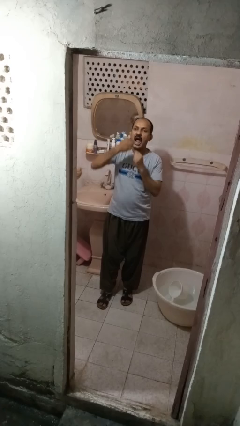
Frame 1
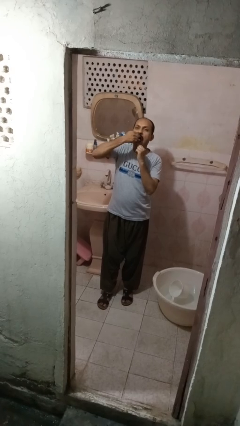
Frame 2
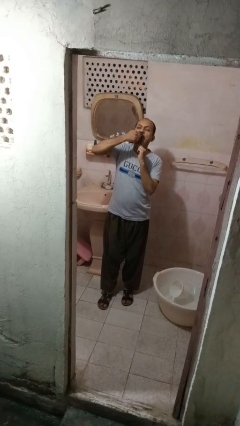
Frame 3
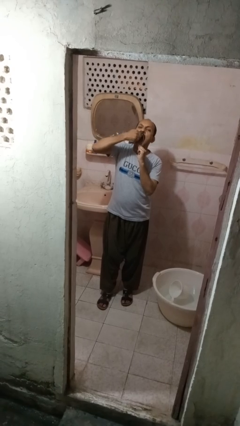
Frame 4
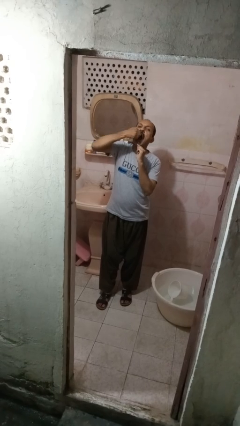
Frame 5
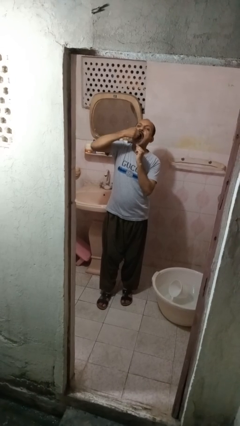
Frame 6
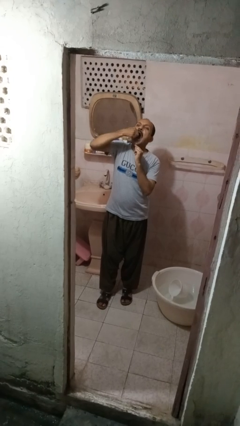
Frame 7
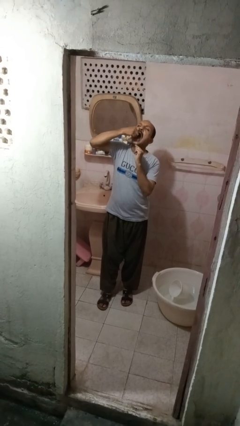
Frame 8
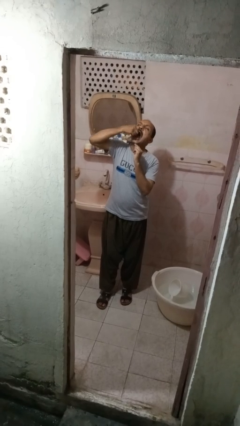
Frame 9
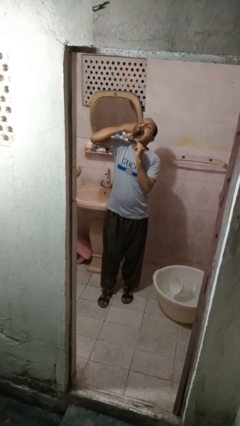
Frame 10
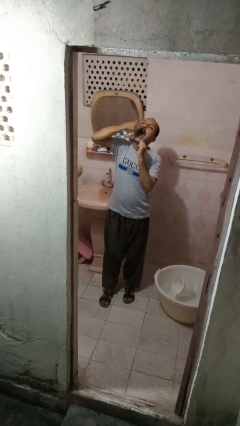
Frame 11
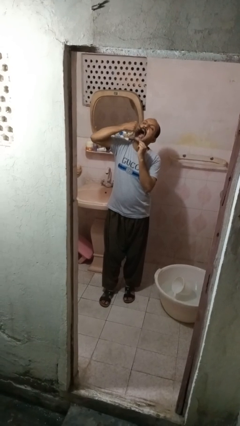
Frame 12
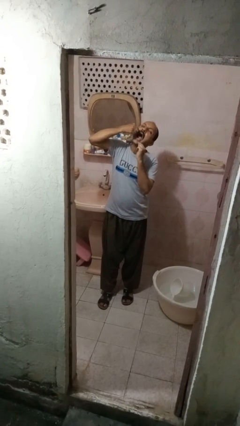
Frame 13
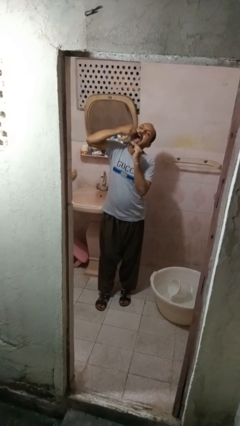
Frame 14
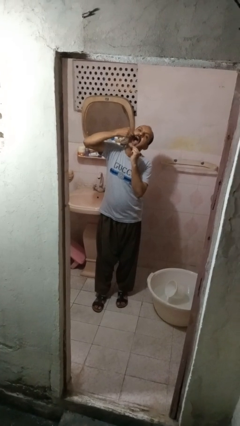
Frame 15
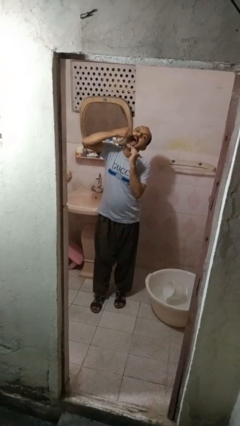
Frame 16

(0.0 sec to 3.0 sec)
person flosses

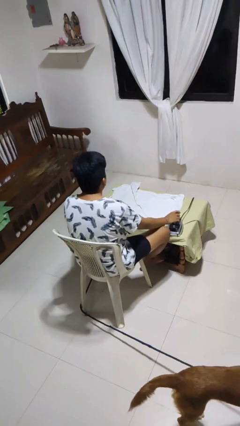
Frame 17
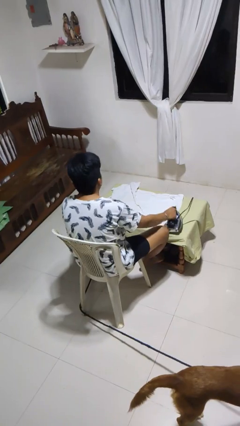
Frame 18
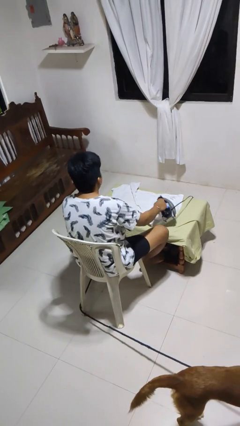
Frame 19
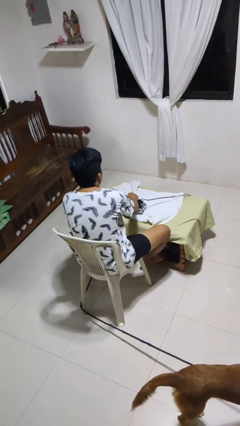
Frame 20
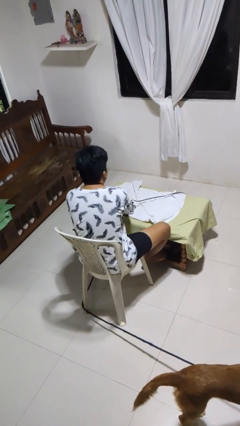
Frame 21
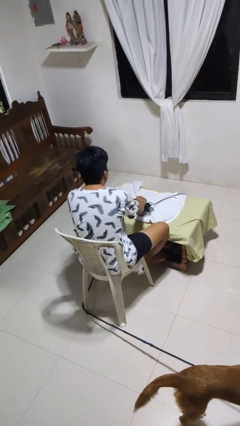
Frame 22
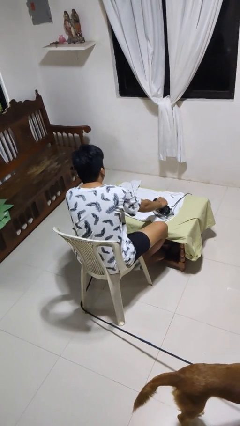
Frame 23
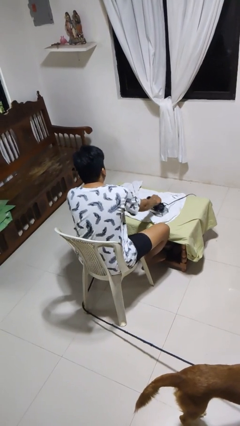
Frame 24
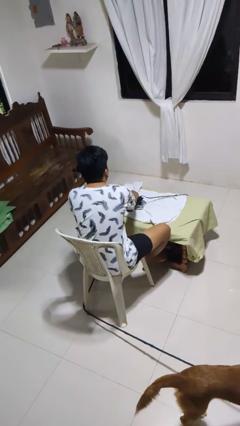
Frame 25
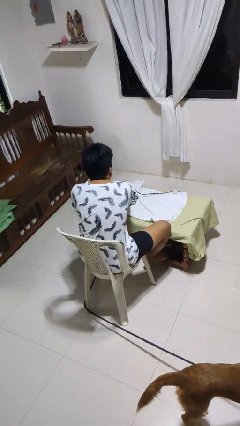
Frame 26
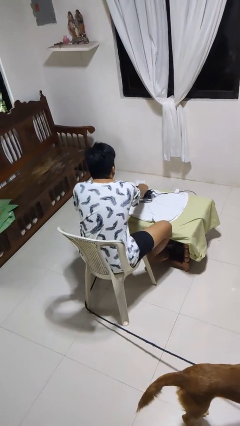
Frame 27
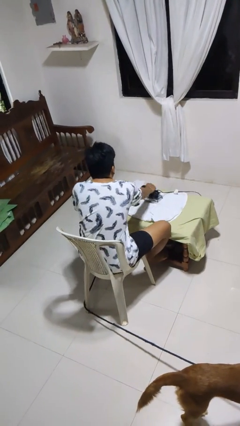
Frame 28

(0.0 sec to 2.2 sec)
person irons clothes

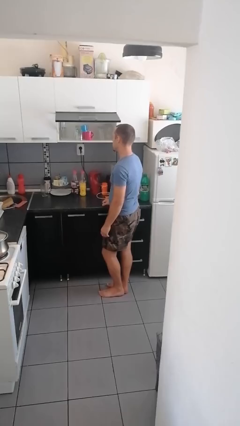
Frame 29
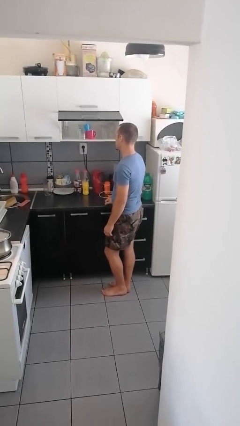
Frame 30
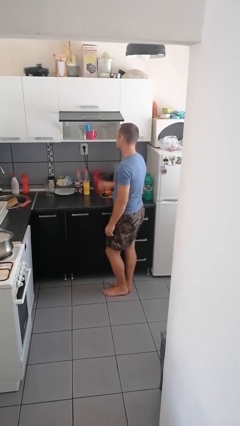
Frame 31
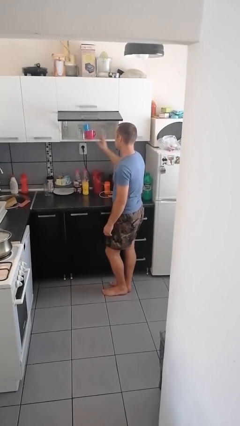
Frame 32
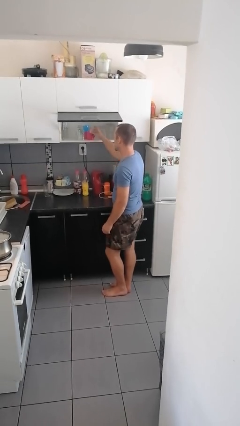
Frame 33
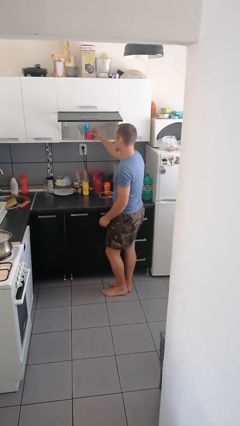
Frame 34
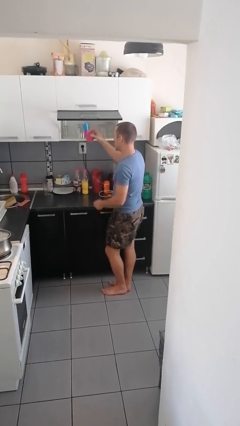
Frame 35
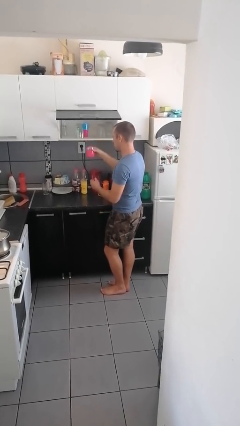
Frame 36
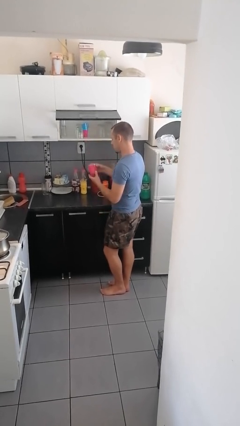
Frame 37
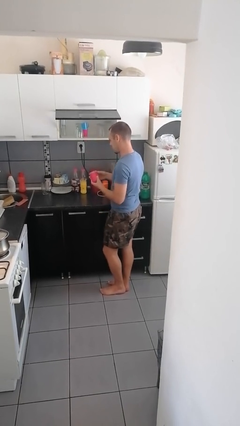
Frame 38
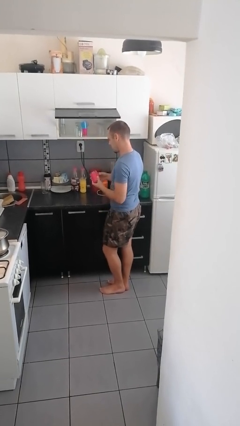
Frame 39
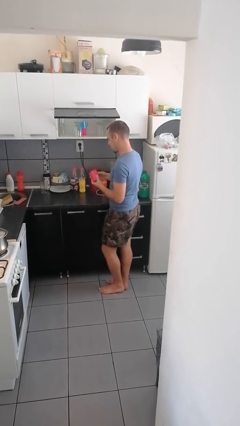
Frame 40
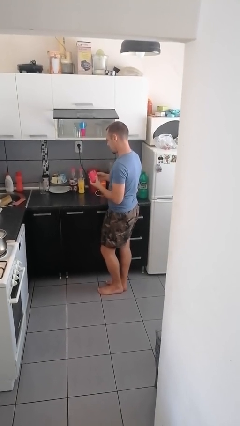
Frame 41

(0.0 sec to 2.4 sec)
person picks up object from cabinet

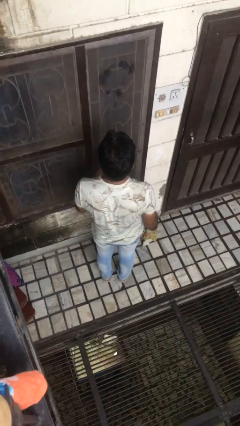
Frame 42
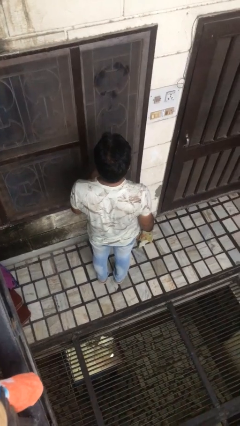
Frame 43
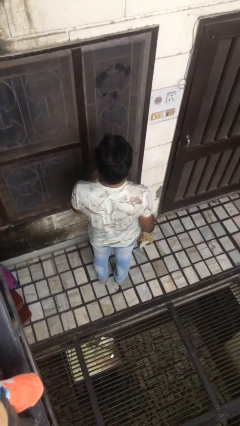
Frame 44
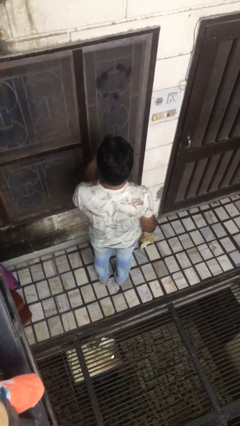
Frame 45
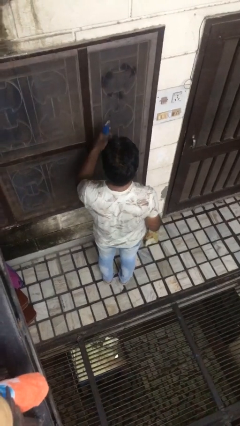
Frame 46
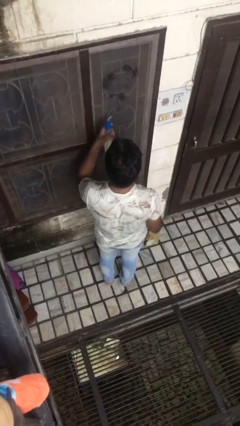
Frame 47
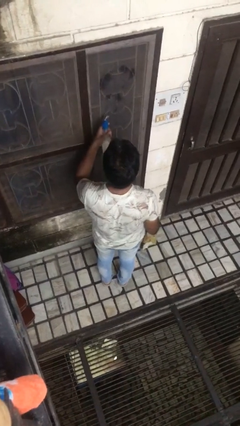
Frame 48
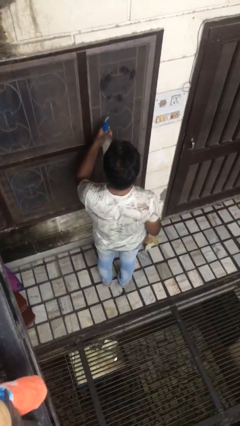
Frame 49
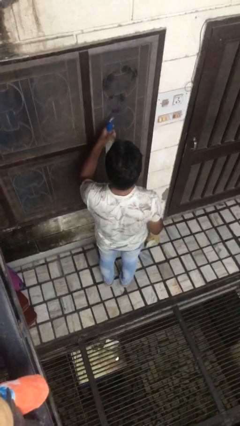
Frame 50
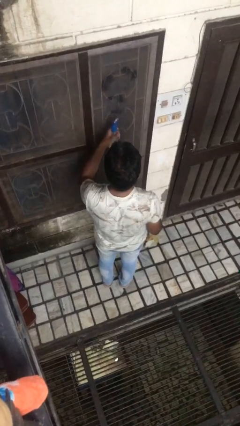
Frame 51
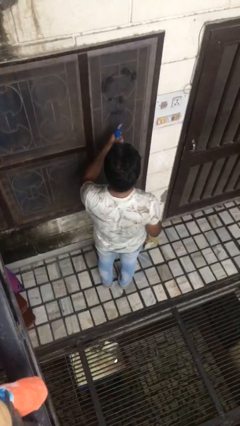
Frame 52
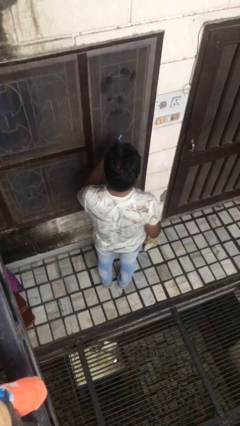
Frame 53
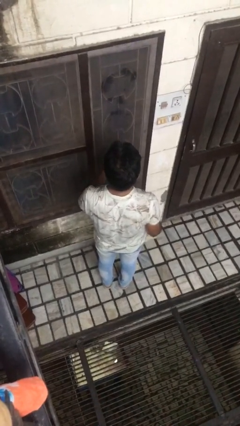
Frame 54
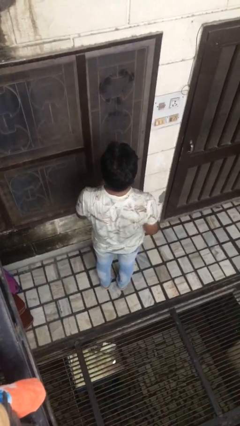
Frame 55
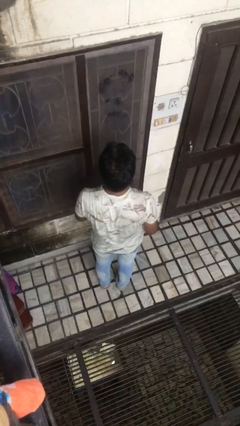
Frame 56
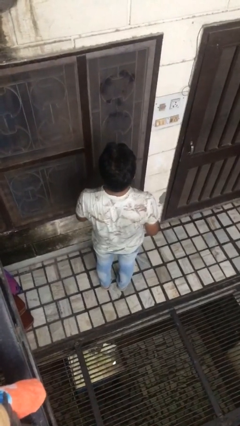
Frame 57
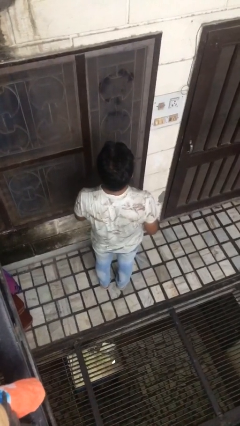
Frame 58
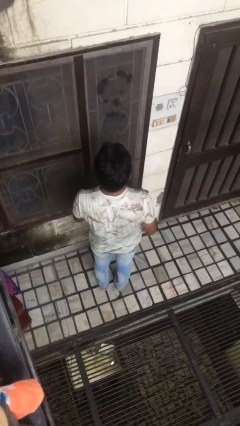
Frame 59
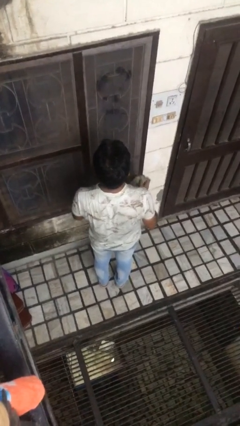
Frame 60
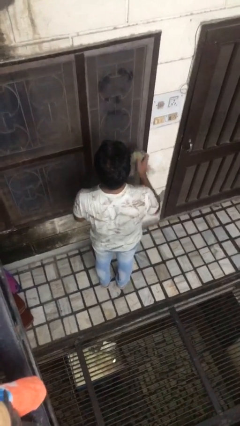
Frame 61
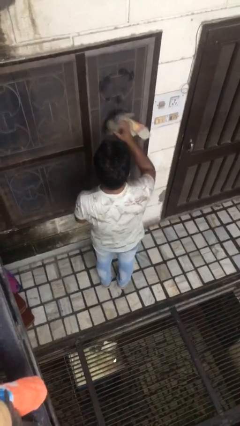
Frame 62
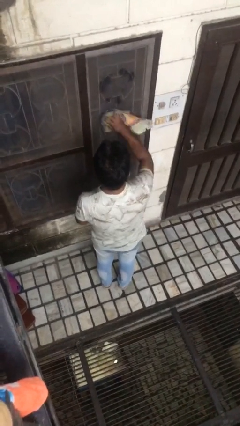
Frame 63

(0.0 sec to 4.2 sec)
person sprays from bottle

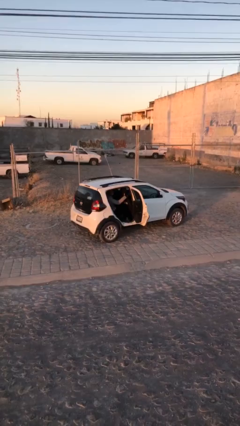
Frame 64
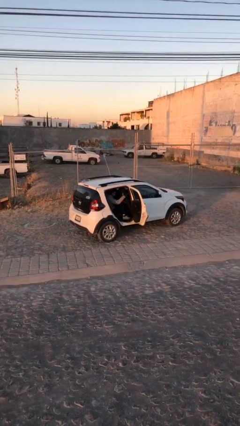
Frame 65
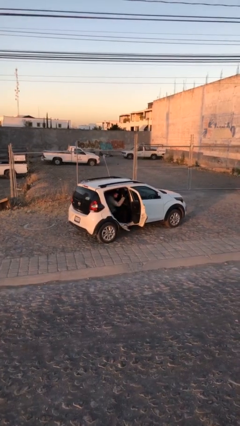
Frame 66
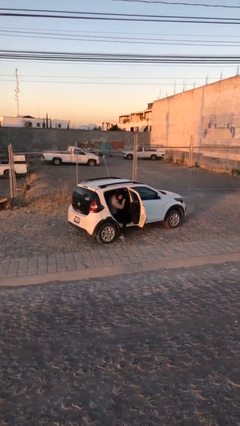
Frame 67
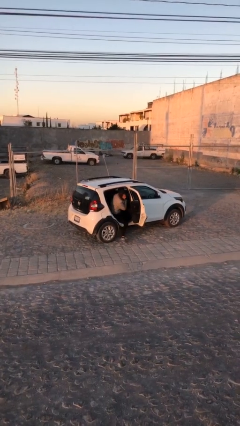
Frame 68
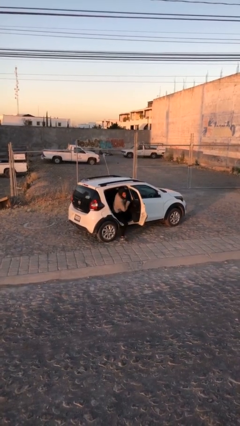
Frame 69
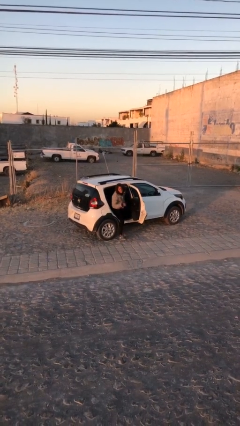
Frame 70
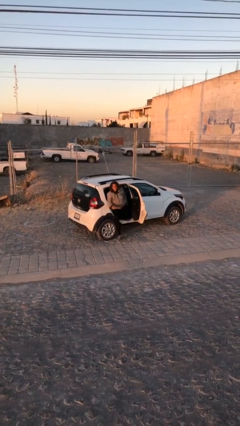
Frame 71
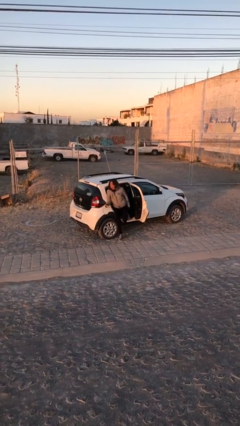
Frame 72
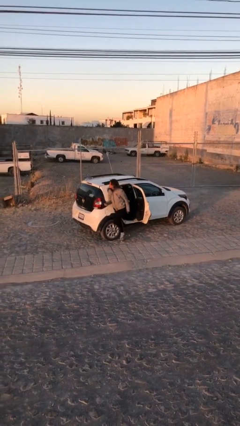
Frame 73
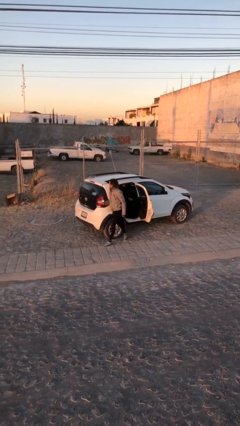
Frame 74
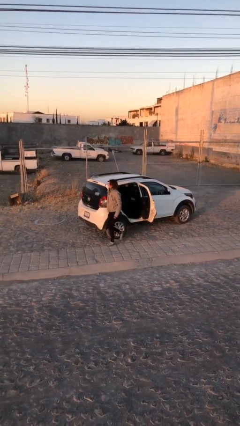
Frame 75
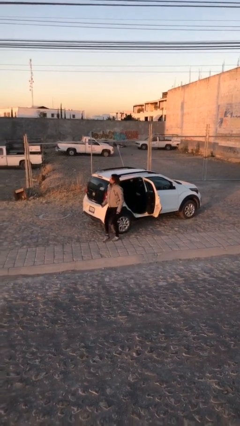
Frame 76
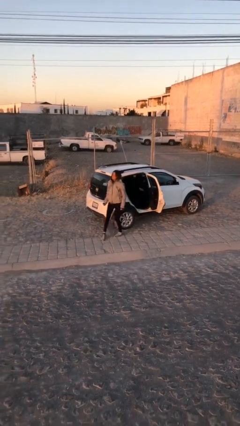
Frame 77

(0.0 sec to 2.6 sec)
person exits car

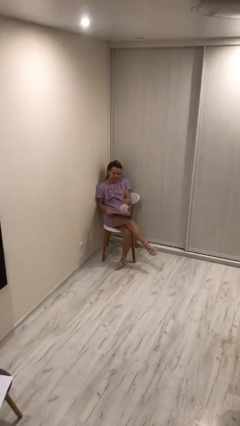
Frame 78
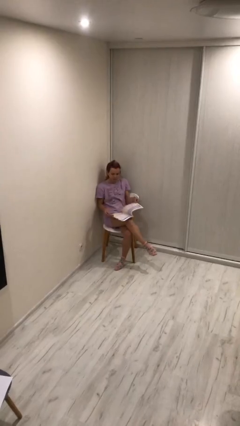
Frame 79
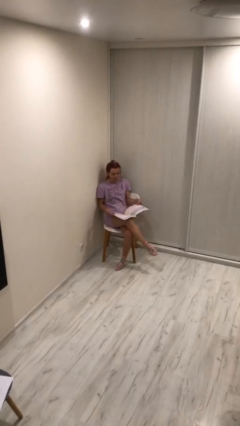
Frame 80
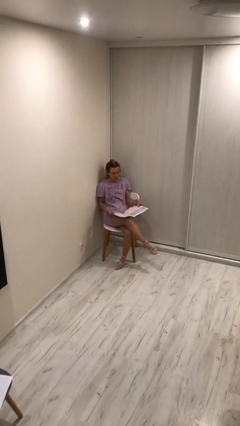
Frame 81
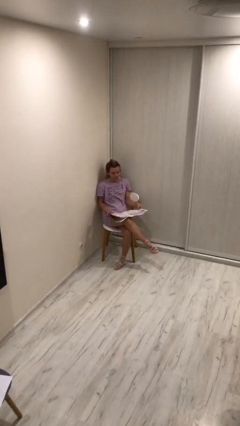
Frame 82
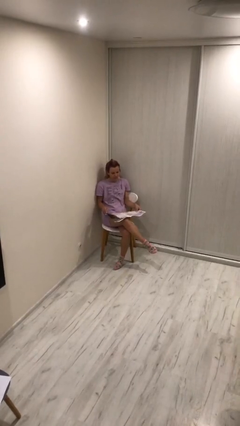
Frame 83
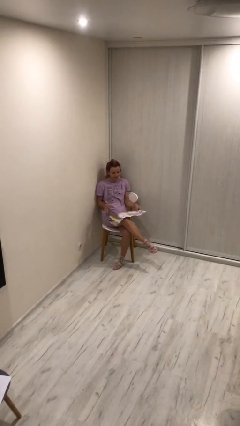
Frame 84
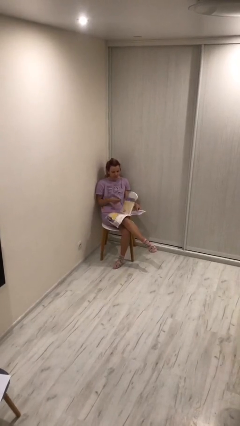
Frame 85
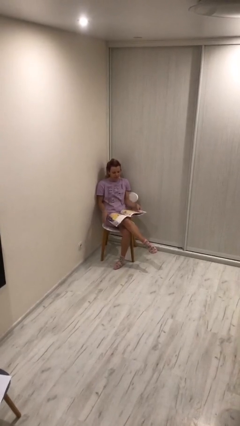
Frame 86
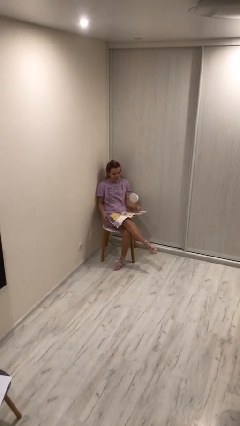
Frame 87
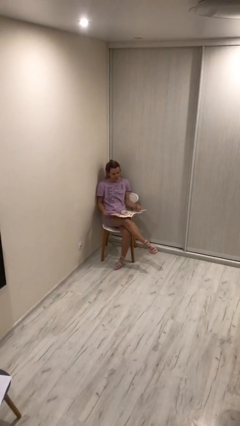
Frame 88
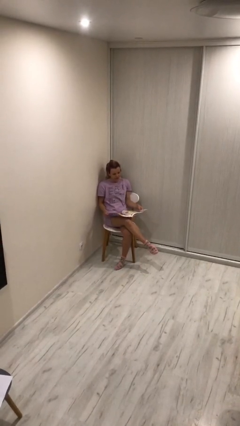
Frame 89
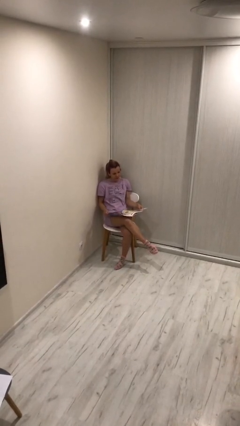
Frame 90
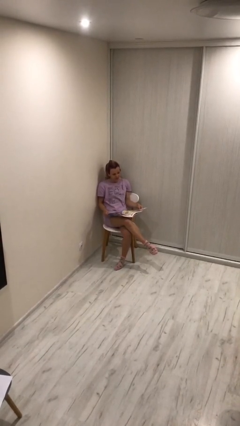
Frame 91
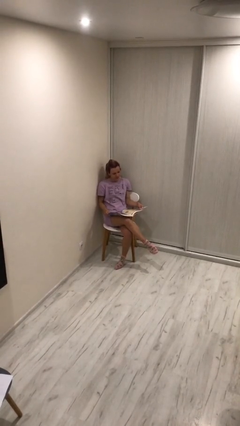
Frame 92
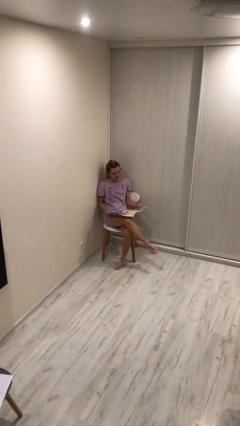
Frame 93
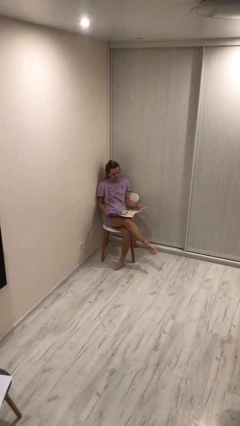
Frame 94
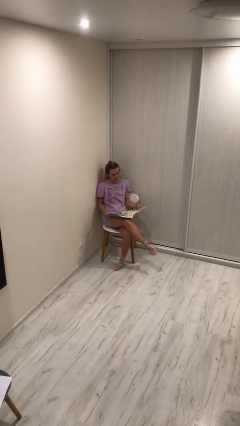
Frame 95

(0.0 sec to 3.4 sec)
person reads magazine
